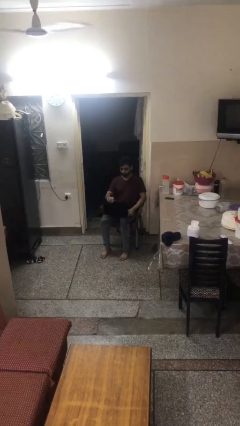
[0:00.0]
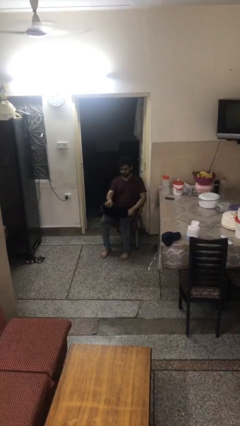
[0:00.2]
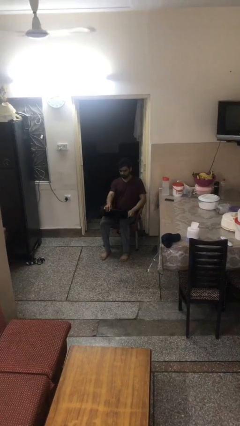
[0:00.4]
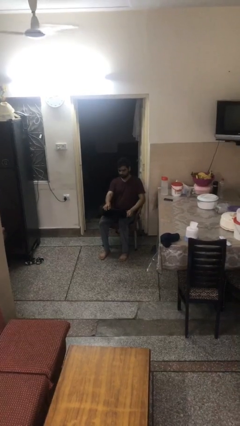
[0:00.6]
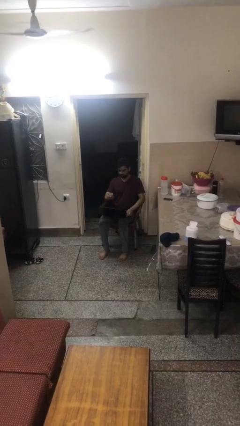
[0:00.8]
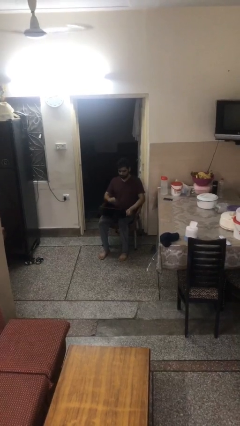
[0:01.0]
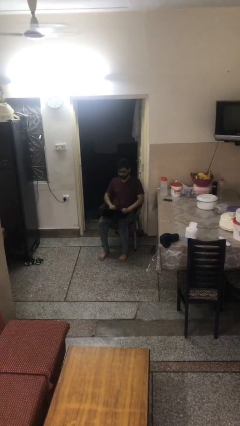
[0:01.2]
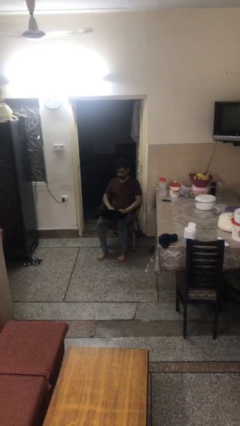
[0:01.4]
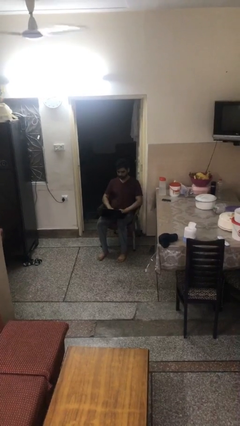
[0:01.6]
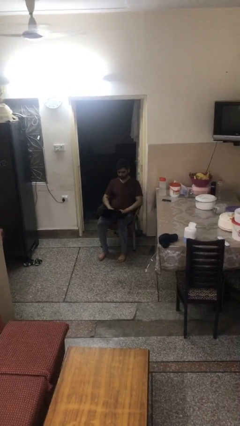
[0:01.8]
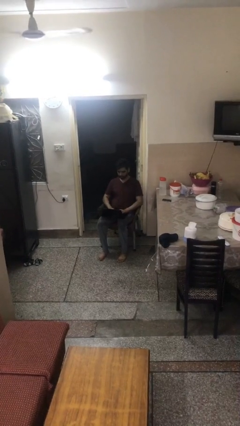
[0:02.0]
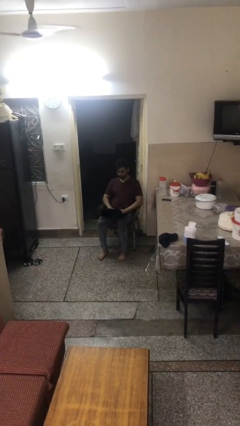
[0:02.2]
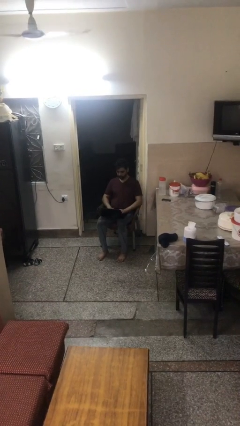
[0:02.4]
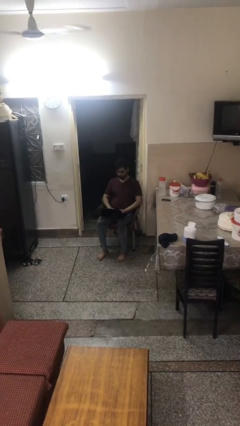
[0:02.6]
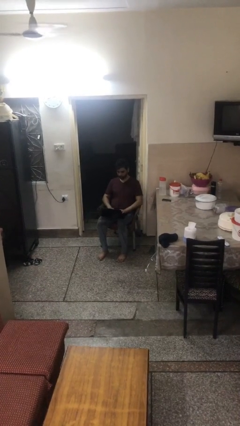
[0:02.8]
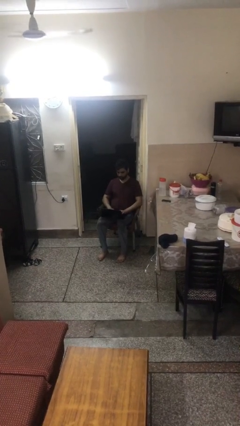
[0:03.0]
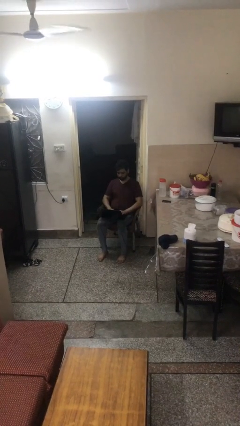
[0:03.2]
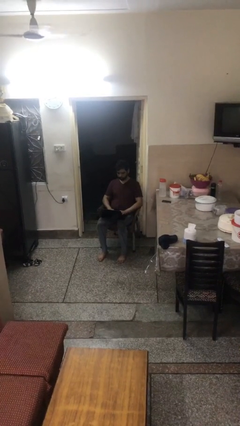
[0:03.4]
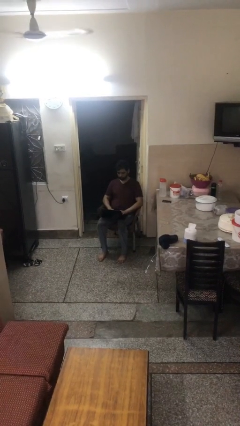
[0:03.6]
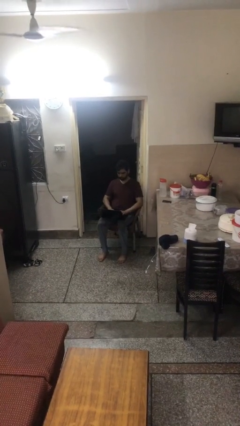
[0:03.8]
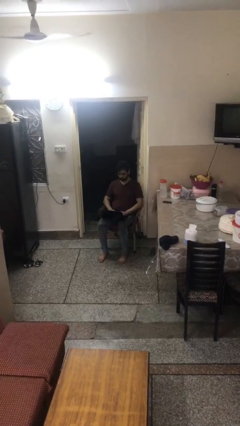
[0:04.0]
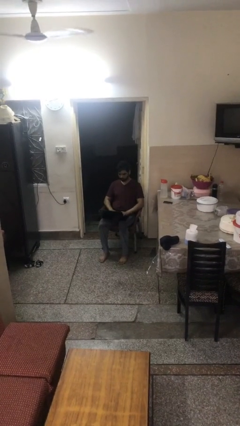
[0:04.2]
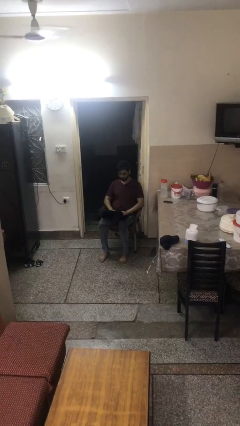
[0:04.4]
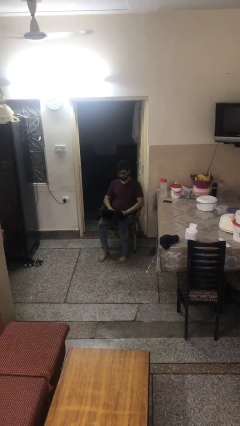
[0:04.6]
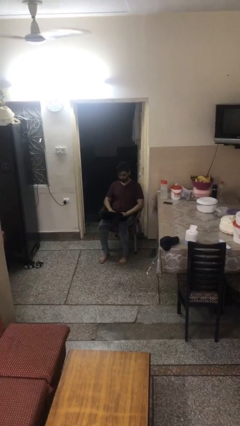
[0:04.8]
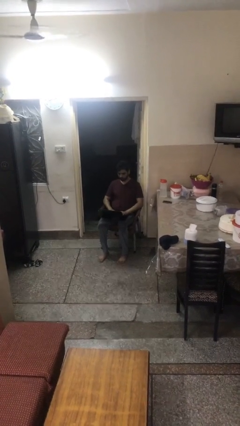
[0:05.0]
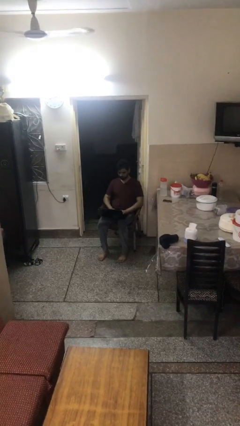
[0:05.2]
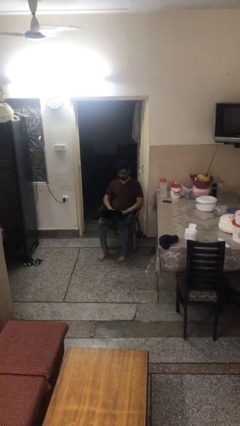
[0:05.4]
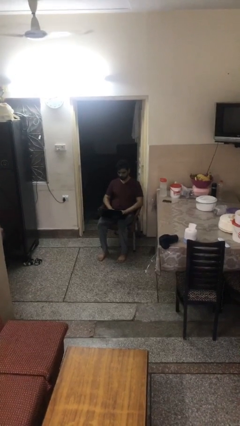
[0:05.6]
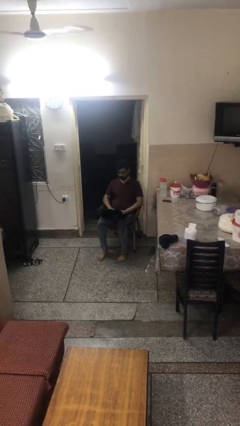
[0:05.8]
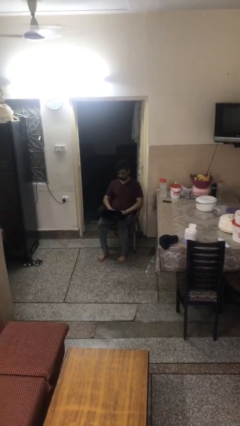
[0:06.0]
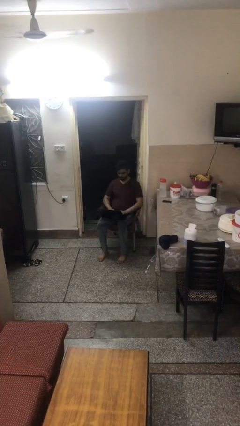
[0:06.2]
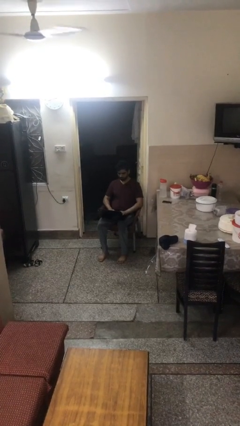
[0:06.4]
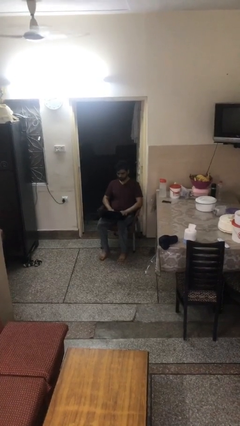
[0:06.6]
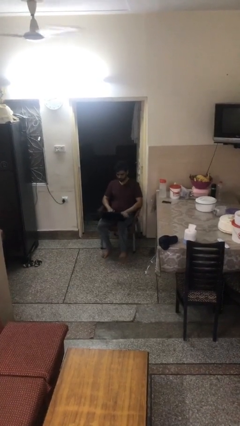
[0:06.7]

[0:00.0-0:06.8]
person interacts with laptop

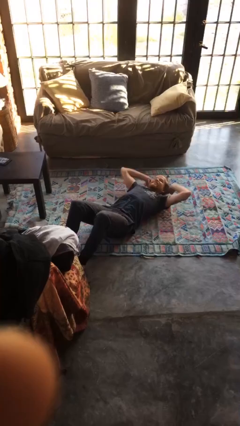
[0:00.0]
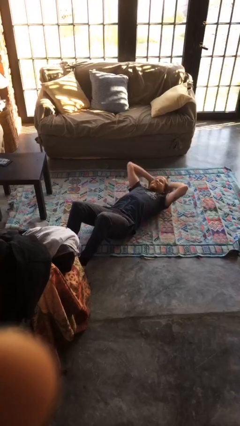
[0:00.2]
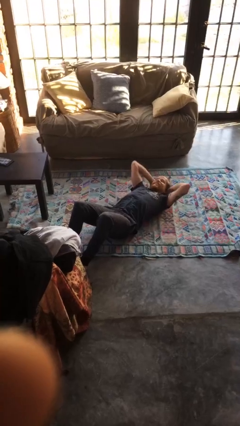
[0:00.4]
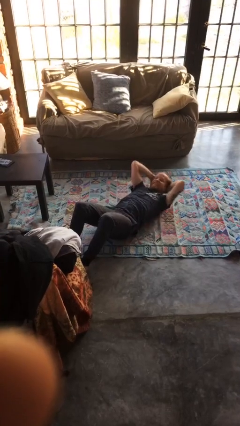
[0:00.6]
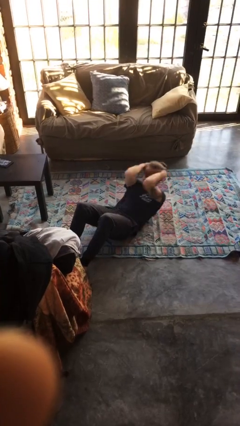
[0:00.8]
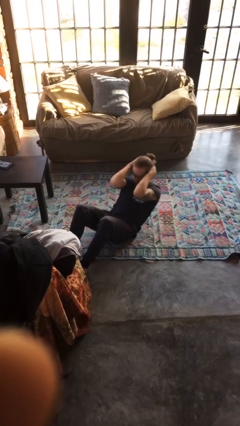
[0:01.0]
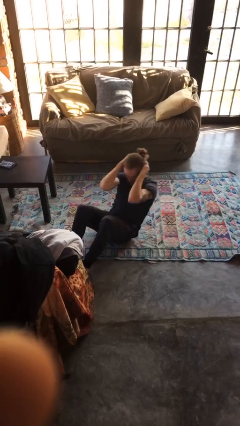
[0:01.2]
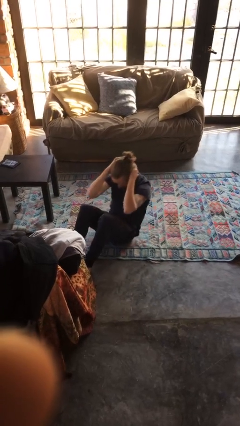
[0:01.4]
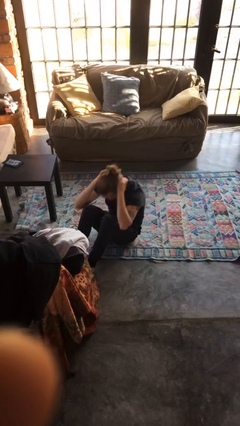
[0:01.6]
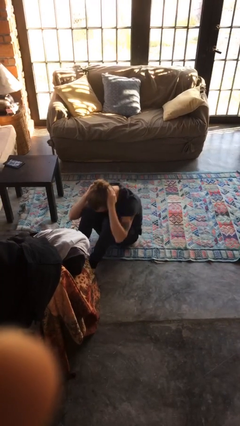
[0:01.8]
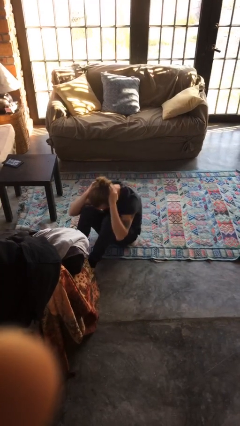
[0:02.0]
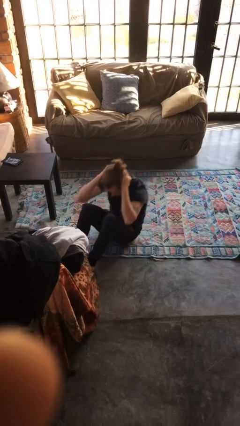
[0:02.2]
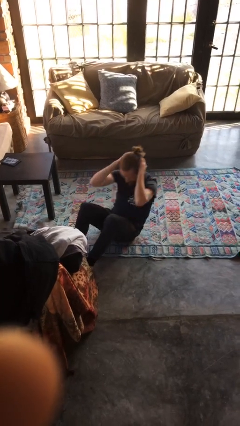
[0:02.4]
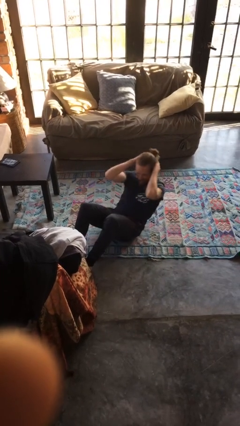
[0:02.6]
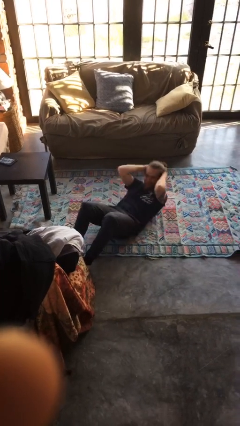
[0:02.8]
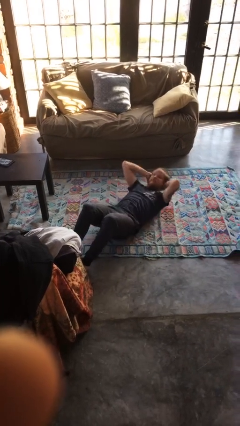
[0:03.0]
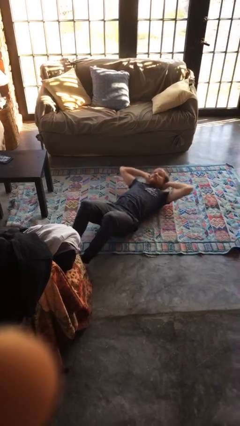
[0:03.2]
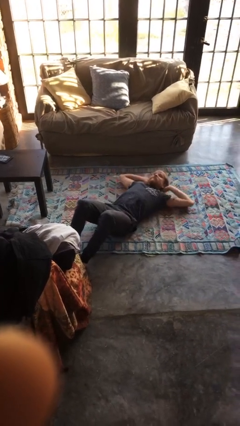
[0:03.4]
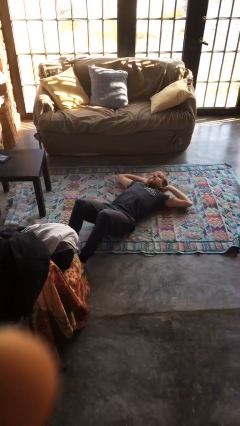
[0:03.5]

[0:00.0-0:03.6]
person exercises with situp

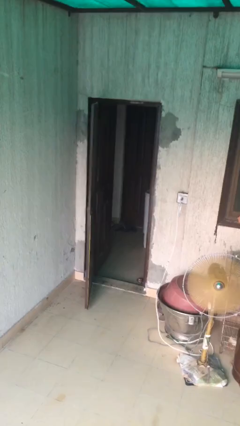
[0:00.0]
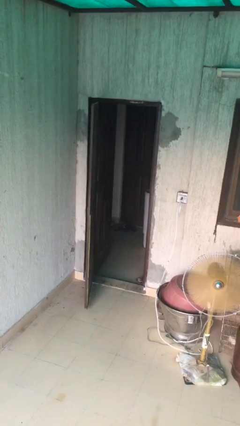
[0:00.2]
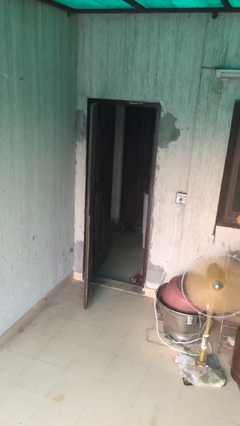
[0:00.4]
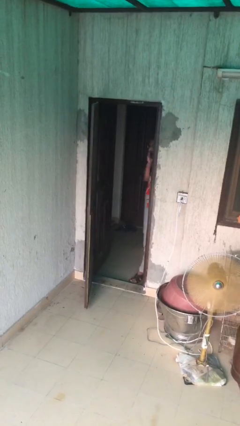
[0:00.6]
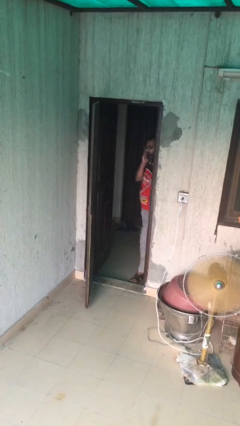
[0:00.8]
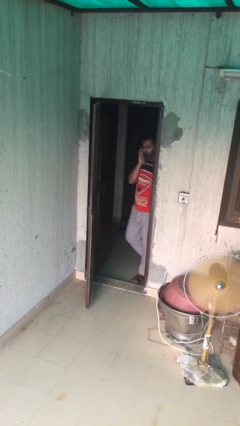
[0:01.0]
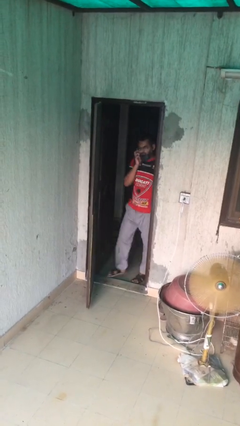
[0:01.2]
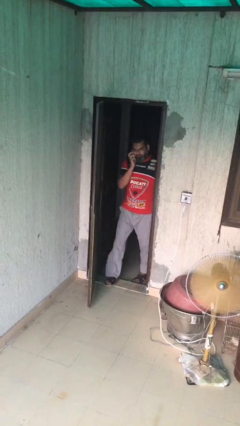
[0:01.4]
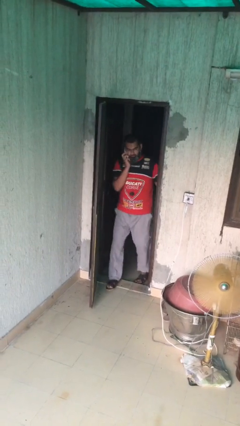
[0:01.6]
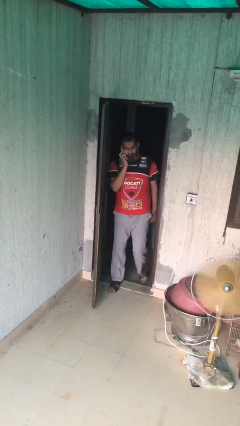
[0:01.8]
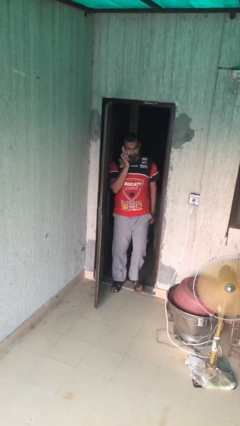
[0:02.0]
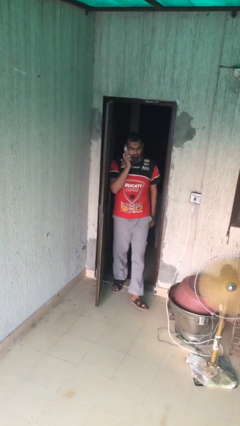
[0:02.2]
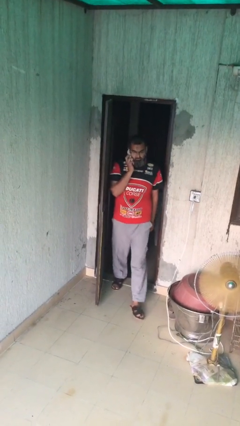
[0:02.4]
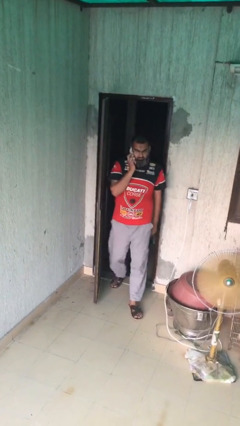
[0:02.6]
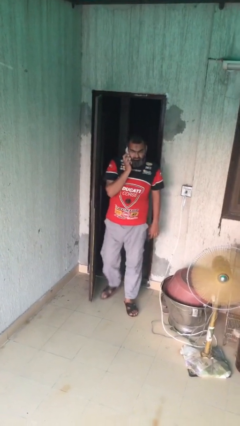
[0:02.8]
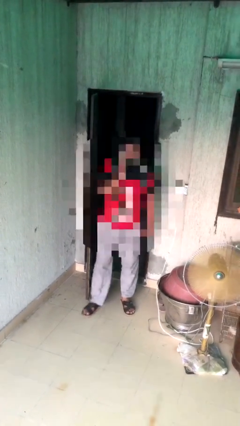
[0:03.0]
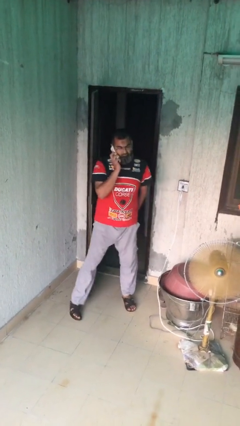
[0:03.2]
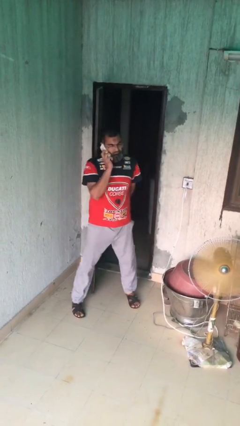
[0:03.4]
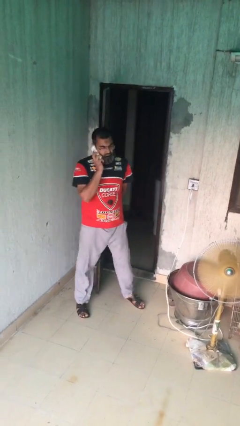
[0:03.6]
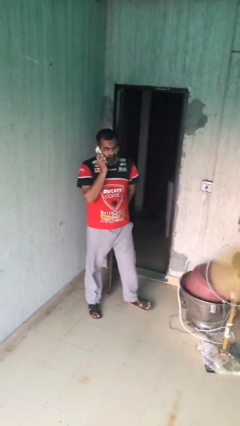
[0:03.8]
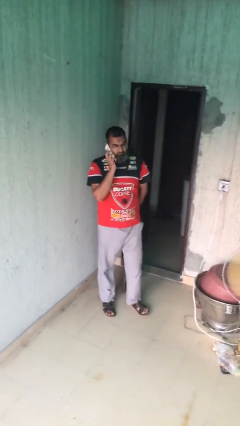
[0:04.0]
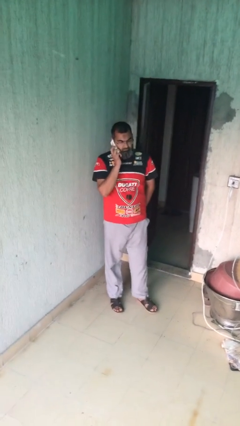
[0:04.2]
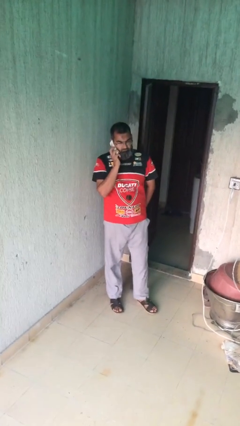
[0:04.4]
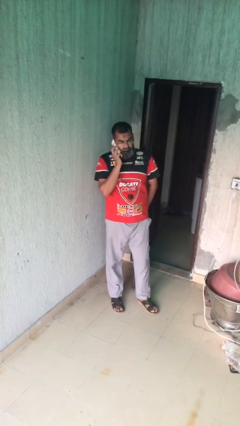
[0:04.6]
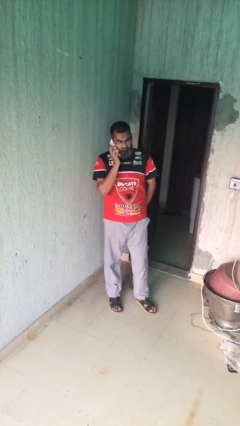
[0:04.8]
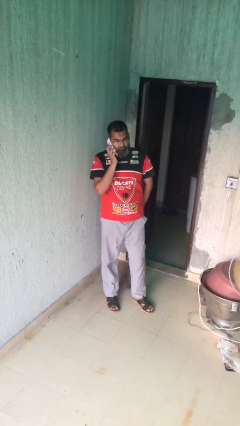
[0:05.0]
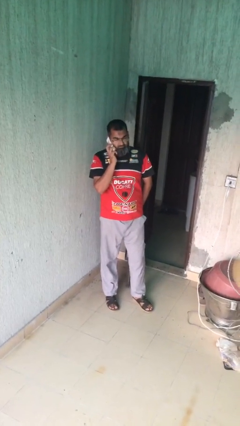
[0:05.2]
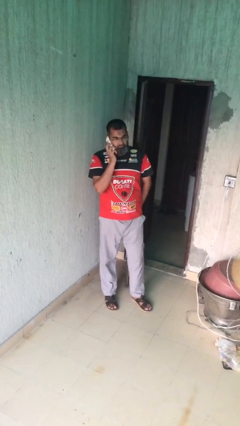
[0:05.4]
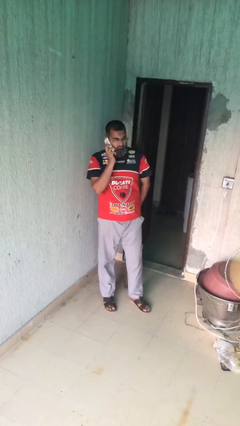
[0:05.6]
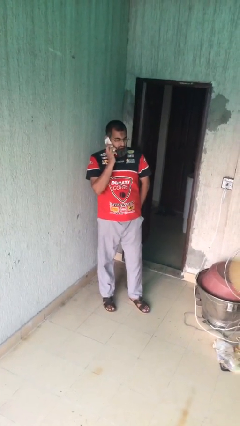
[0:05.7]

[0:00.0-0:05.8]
person enters scene through structure

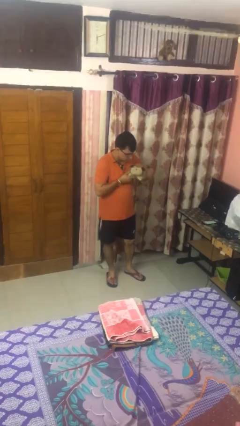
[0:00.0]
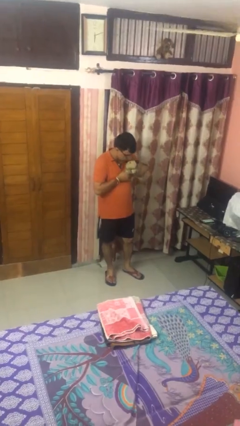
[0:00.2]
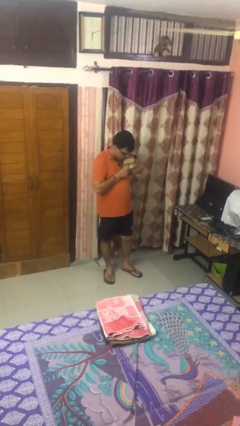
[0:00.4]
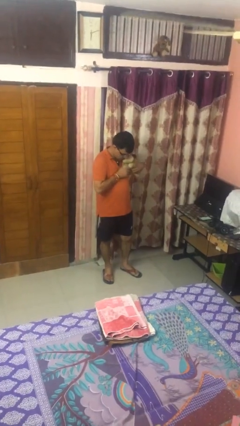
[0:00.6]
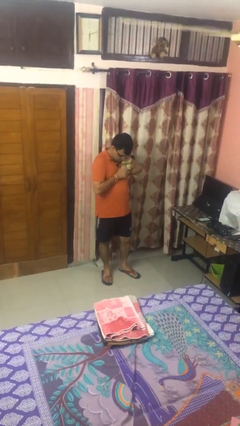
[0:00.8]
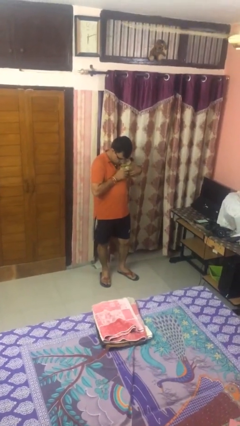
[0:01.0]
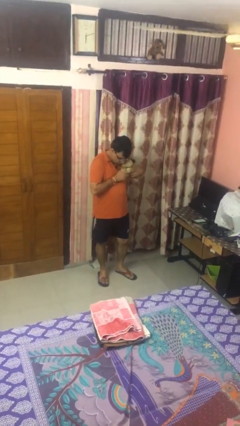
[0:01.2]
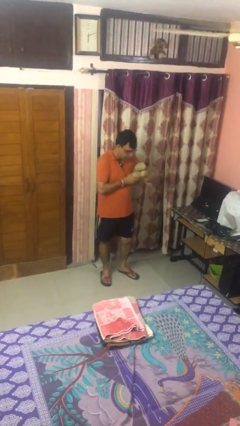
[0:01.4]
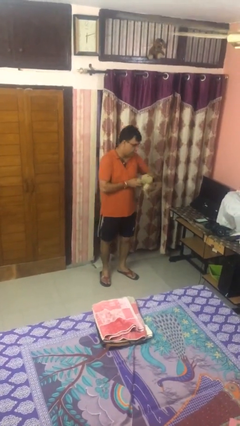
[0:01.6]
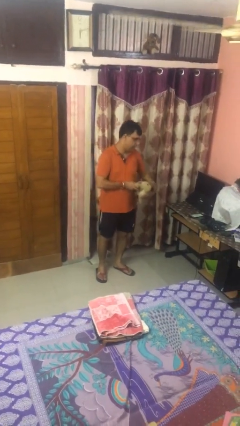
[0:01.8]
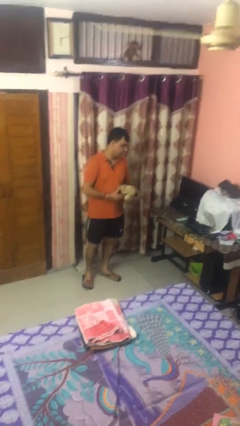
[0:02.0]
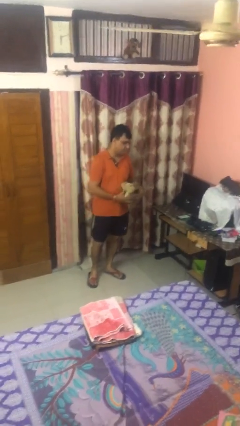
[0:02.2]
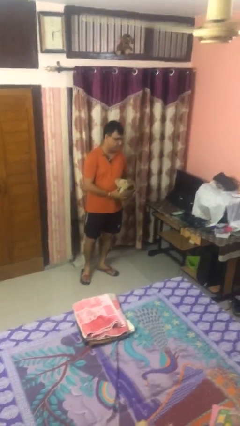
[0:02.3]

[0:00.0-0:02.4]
person hugs stuffed animal
